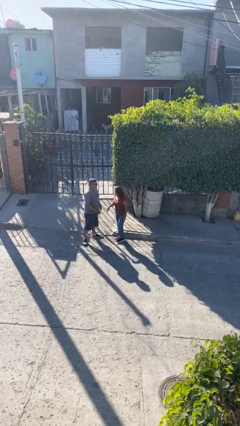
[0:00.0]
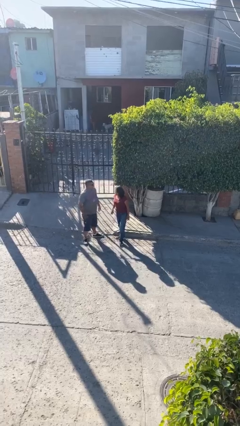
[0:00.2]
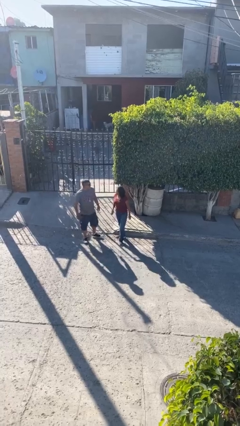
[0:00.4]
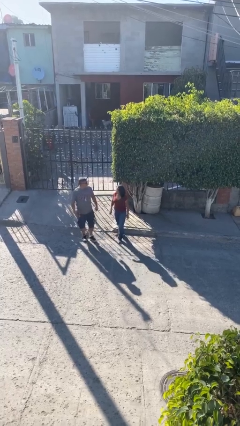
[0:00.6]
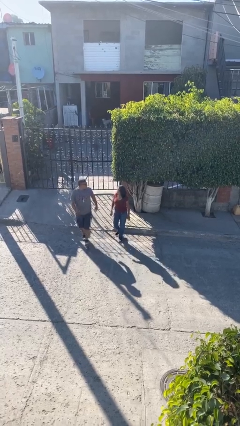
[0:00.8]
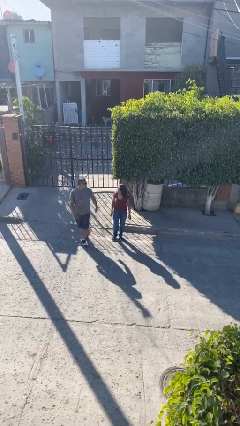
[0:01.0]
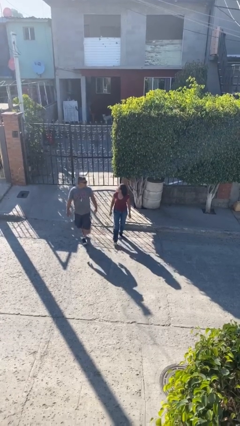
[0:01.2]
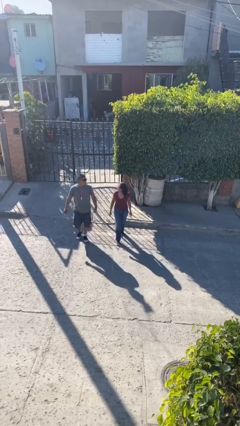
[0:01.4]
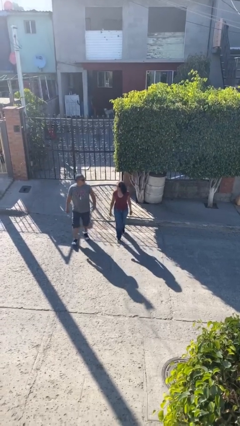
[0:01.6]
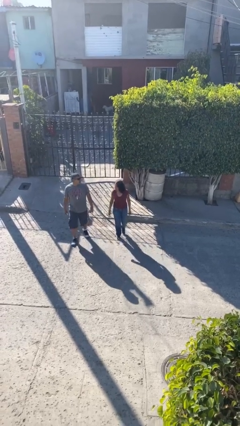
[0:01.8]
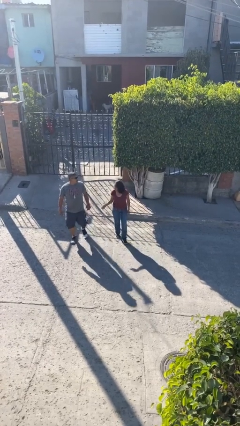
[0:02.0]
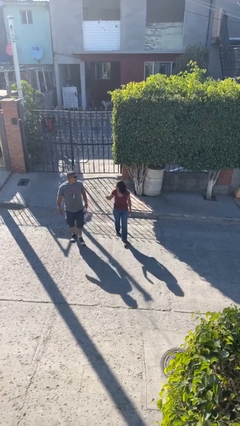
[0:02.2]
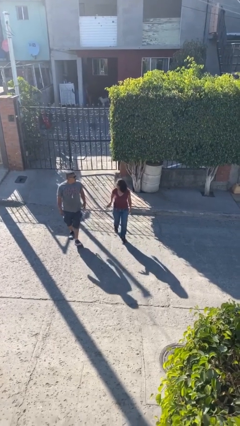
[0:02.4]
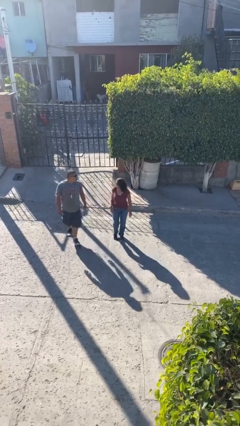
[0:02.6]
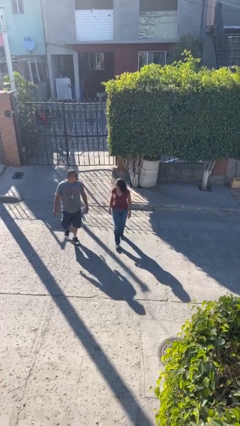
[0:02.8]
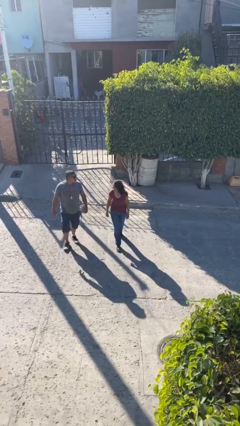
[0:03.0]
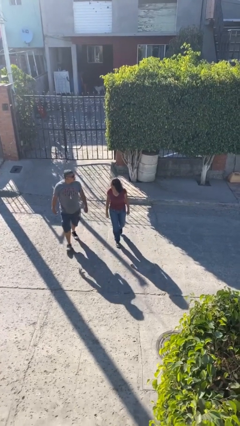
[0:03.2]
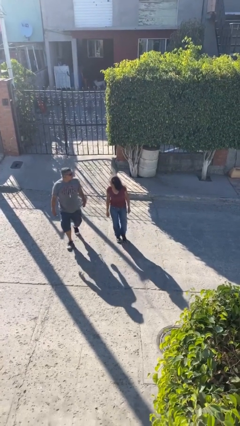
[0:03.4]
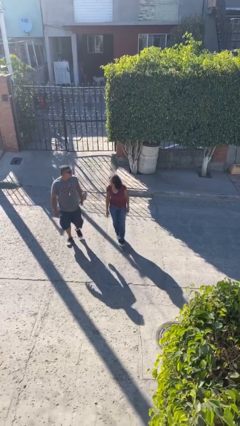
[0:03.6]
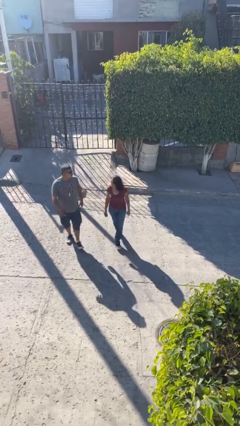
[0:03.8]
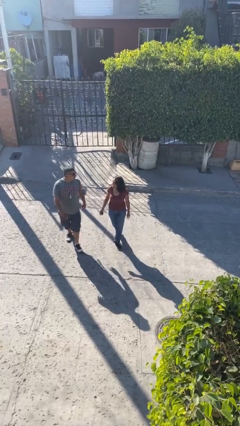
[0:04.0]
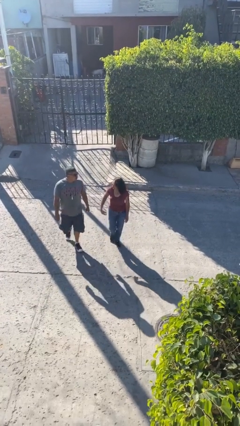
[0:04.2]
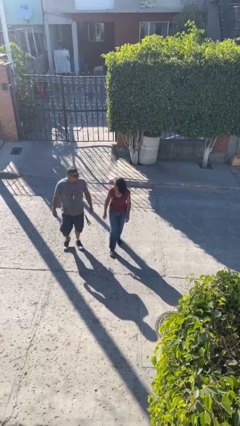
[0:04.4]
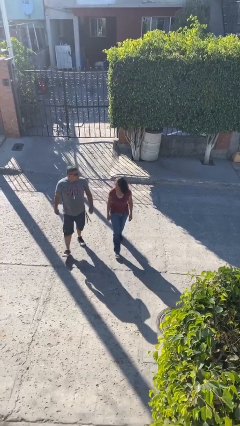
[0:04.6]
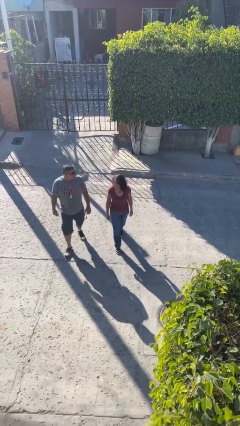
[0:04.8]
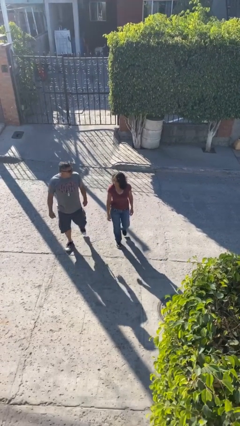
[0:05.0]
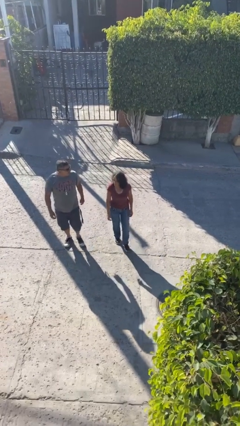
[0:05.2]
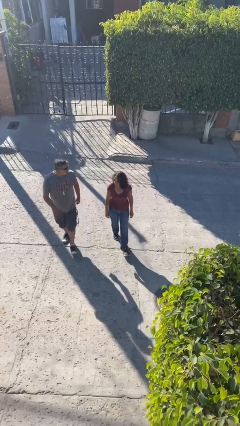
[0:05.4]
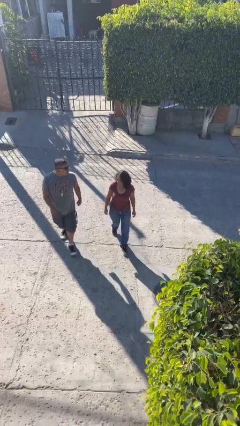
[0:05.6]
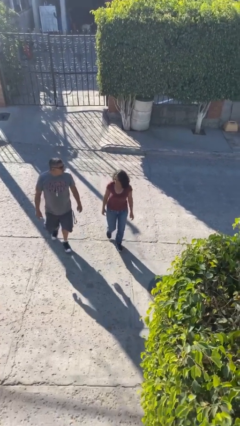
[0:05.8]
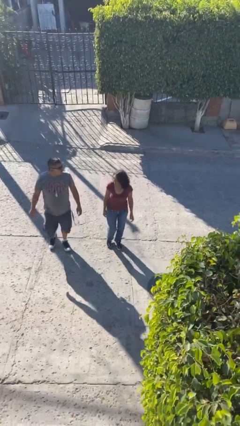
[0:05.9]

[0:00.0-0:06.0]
person talks to person

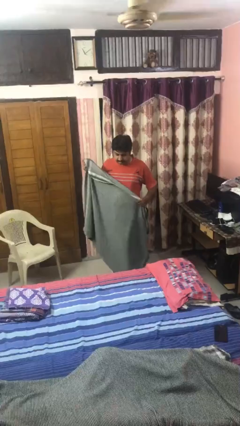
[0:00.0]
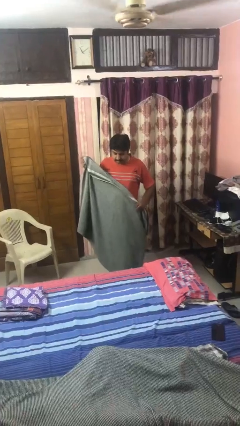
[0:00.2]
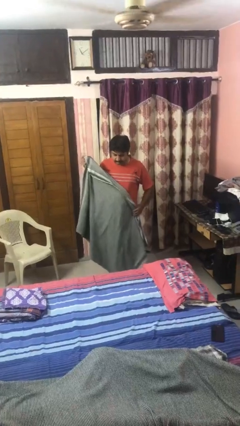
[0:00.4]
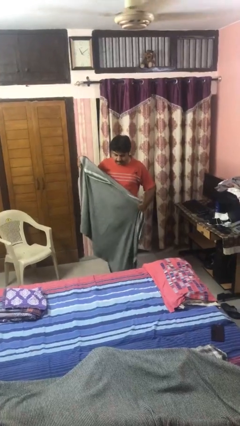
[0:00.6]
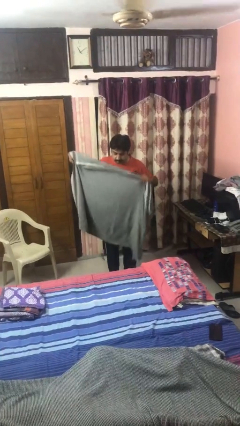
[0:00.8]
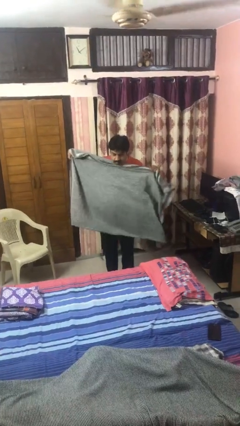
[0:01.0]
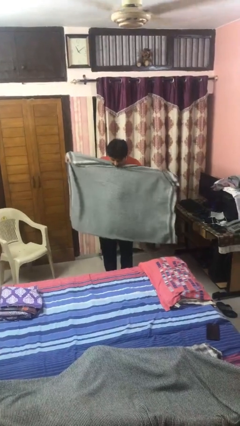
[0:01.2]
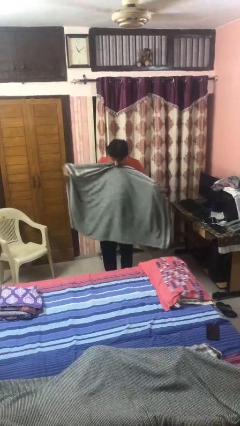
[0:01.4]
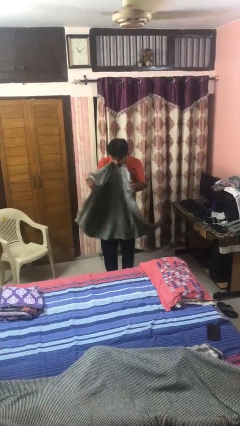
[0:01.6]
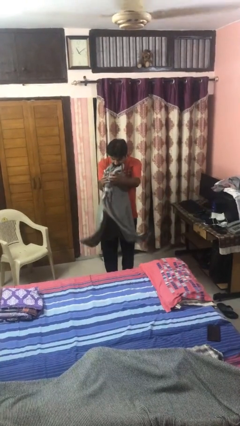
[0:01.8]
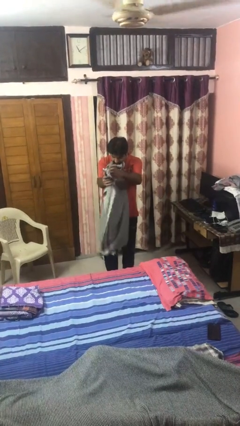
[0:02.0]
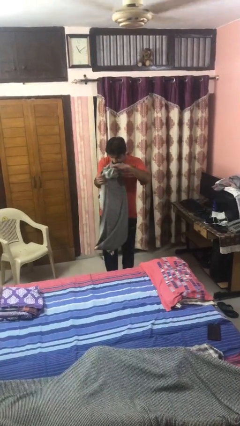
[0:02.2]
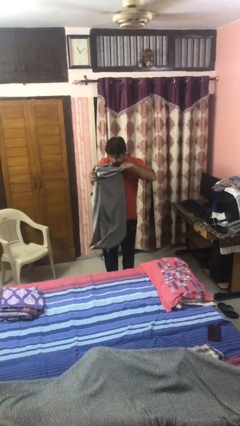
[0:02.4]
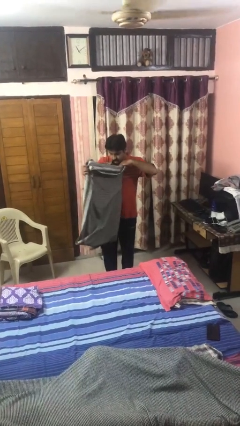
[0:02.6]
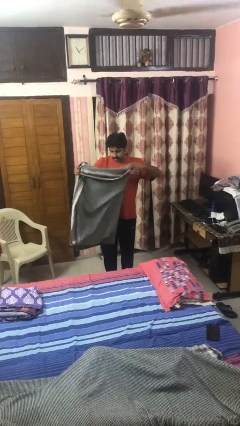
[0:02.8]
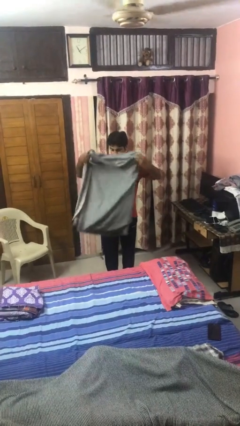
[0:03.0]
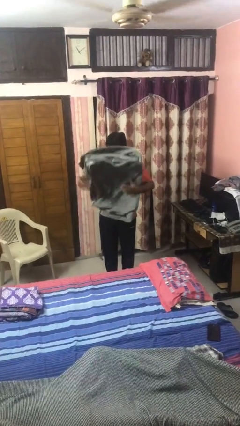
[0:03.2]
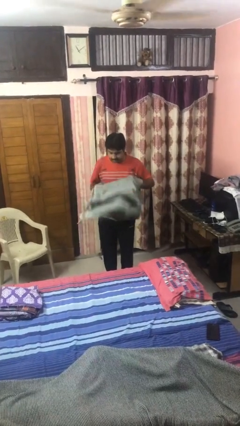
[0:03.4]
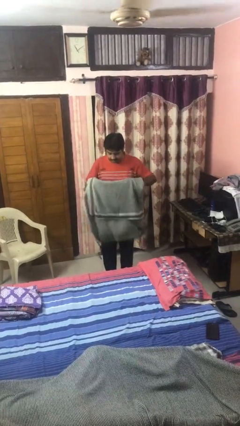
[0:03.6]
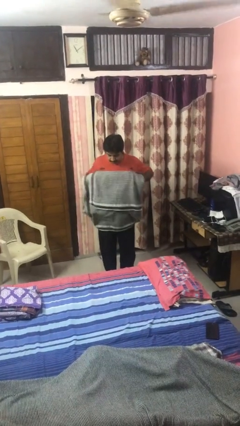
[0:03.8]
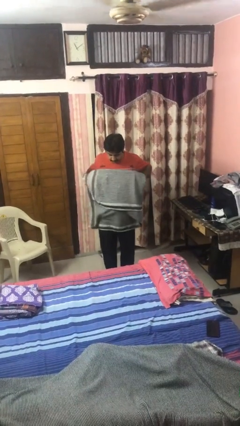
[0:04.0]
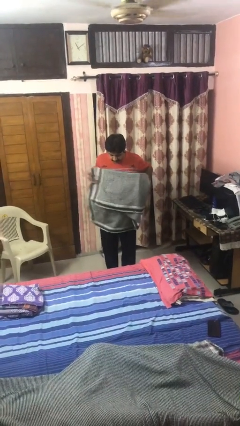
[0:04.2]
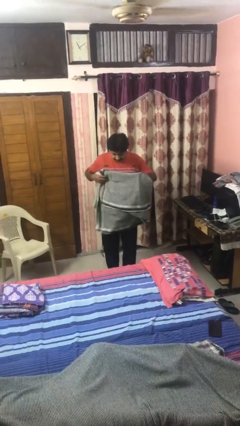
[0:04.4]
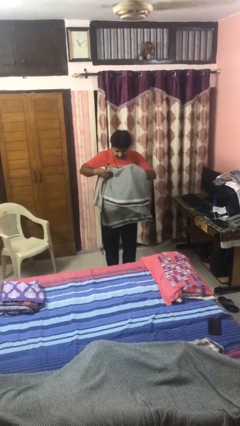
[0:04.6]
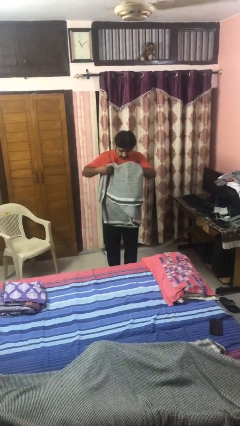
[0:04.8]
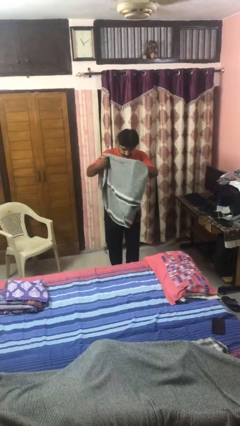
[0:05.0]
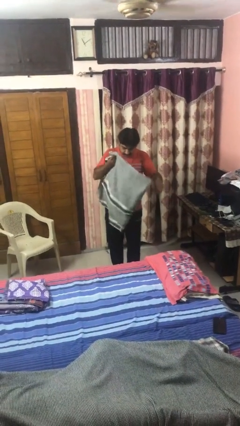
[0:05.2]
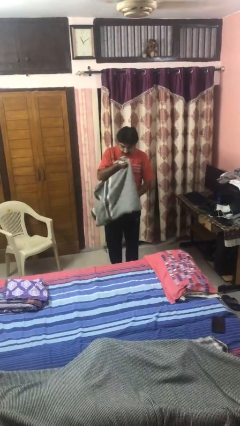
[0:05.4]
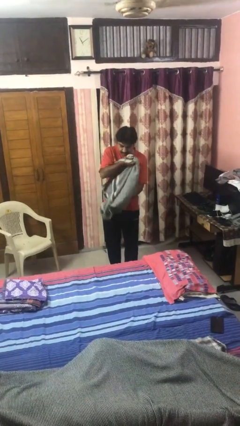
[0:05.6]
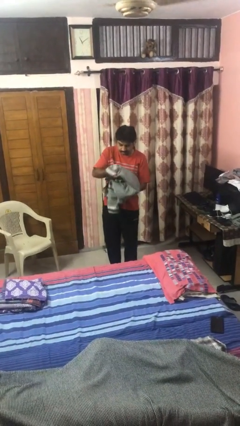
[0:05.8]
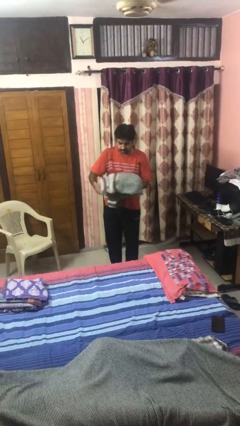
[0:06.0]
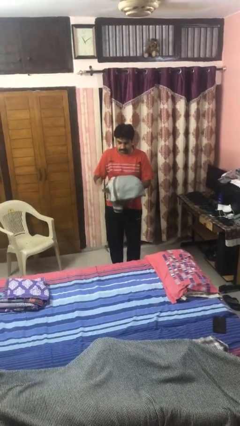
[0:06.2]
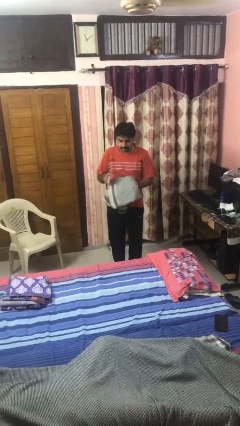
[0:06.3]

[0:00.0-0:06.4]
person folds blanket

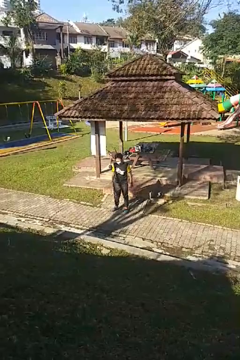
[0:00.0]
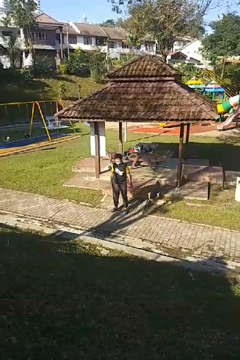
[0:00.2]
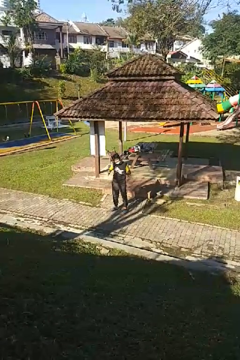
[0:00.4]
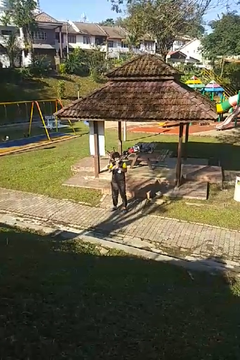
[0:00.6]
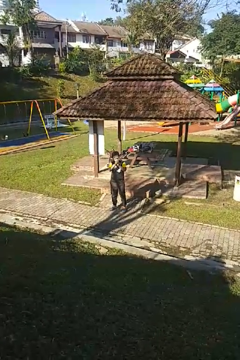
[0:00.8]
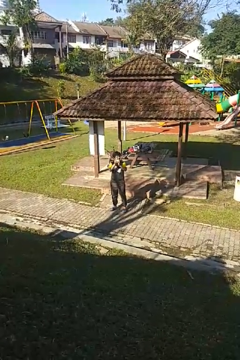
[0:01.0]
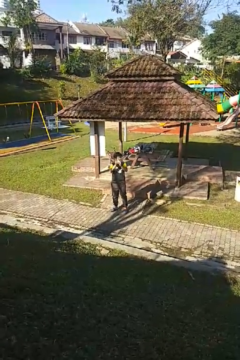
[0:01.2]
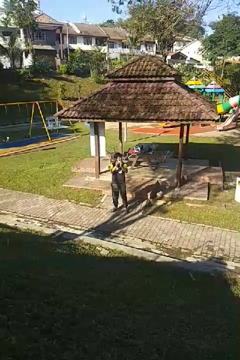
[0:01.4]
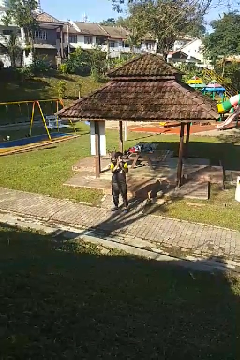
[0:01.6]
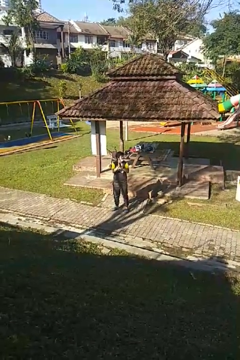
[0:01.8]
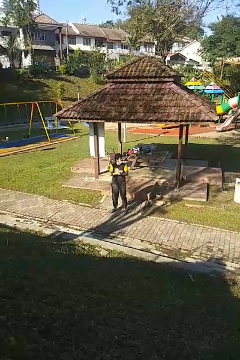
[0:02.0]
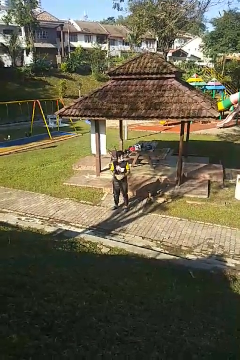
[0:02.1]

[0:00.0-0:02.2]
person claps hands

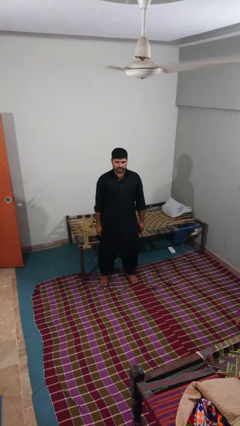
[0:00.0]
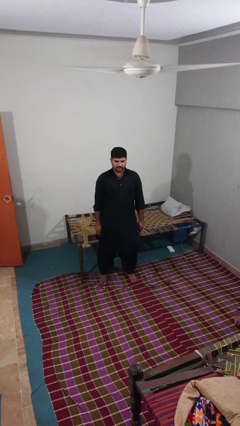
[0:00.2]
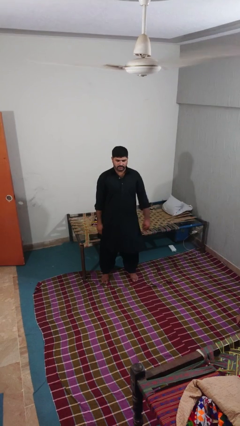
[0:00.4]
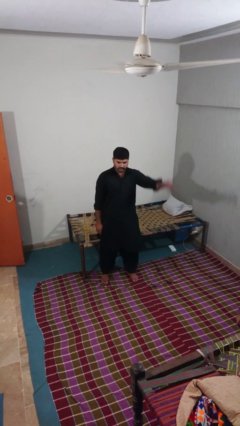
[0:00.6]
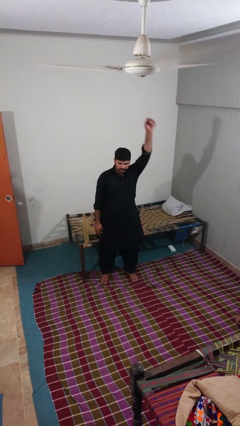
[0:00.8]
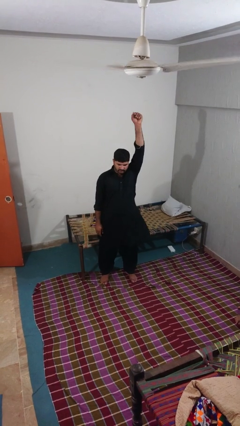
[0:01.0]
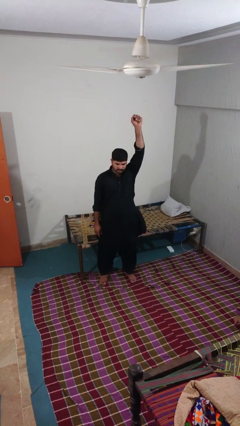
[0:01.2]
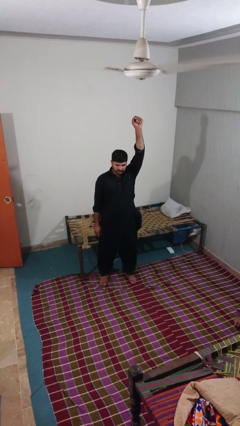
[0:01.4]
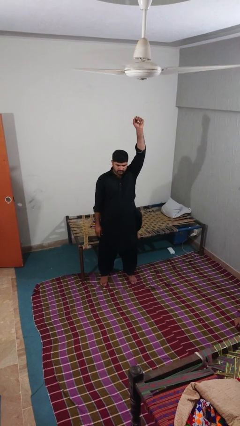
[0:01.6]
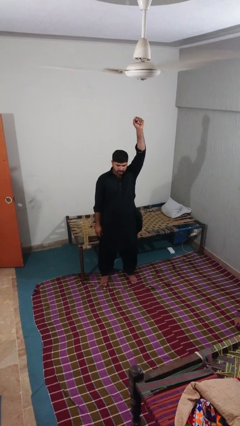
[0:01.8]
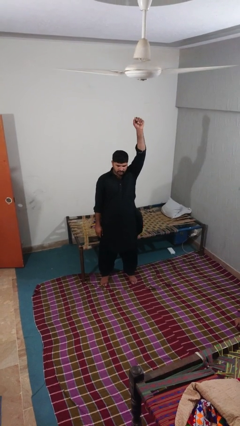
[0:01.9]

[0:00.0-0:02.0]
person gestures raise hand

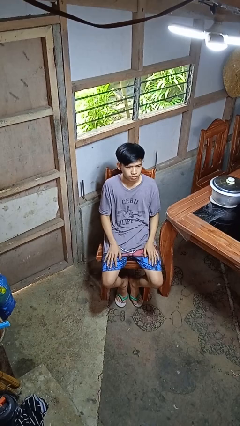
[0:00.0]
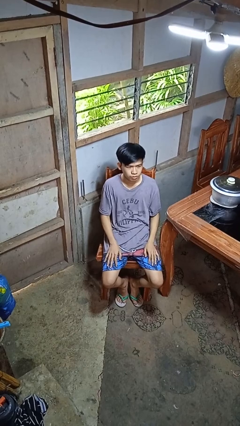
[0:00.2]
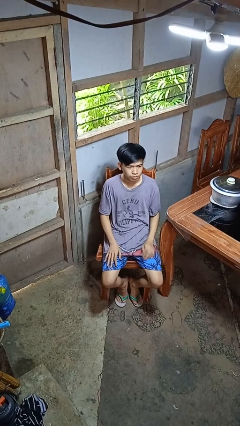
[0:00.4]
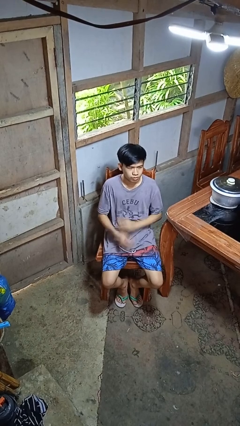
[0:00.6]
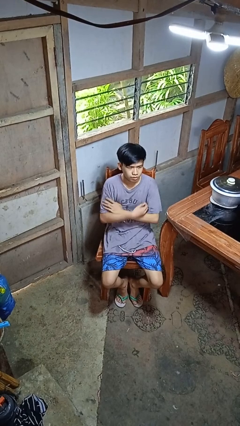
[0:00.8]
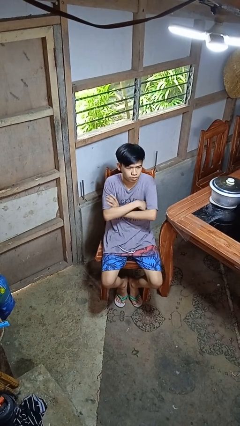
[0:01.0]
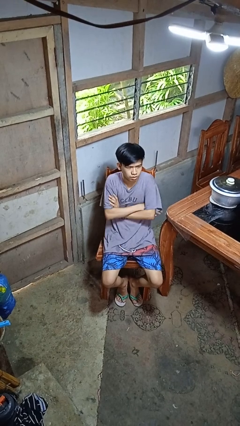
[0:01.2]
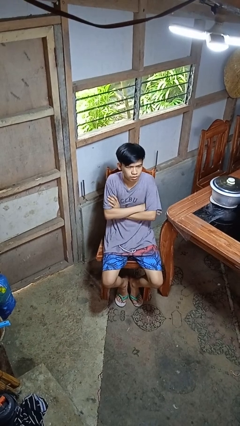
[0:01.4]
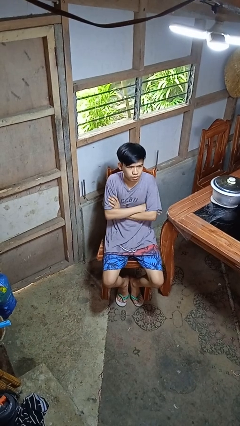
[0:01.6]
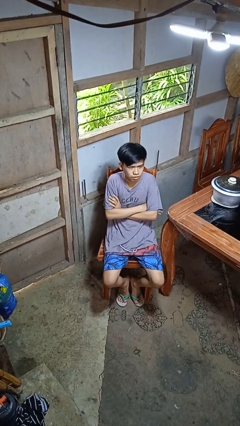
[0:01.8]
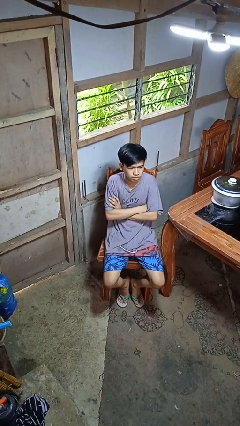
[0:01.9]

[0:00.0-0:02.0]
person crosses arms
